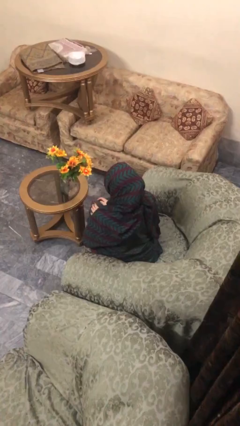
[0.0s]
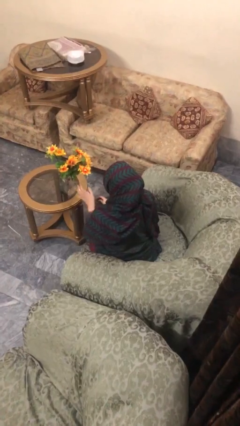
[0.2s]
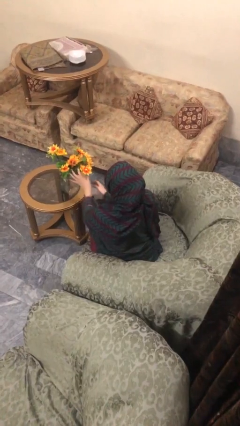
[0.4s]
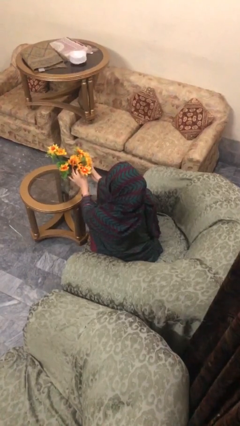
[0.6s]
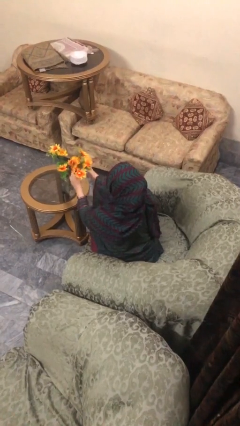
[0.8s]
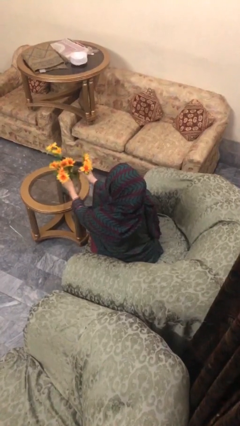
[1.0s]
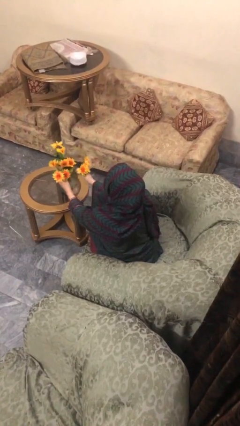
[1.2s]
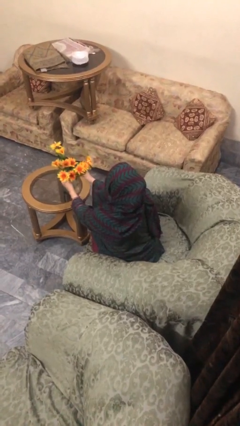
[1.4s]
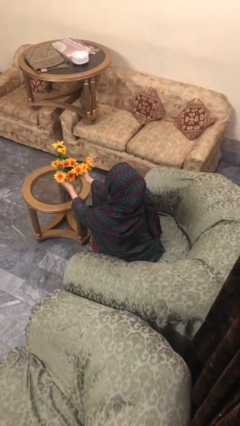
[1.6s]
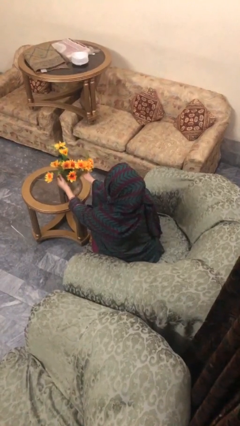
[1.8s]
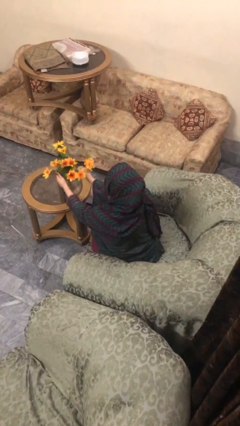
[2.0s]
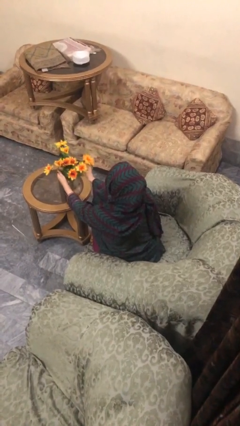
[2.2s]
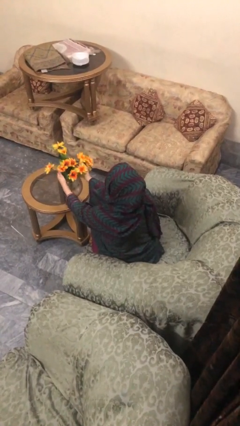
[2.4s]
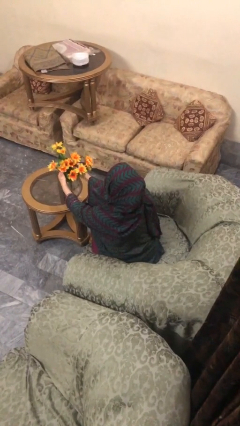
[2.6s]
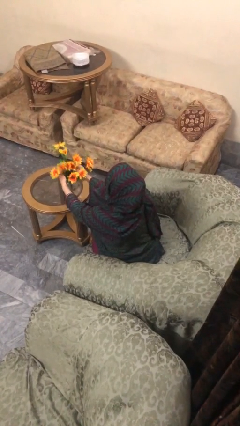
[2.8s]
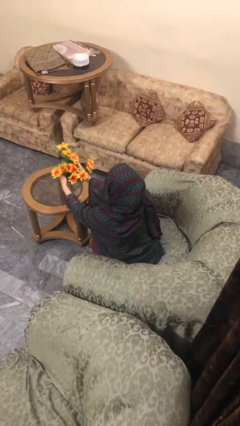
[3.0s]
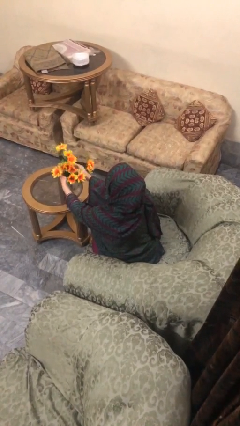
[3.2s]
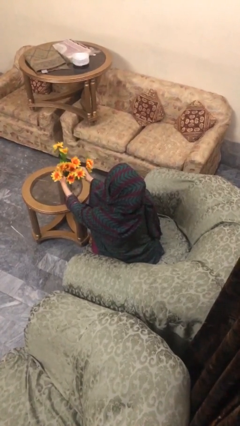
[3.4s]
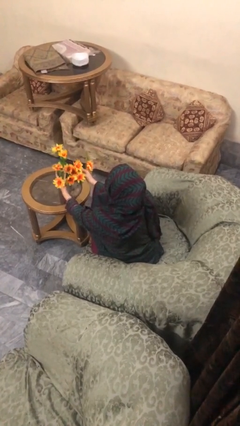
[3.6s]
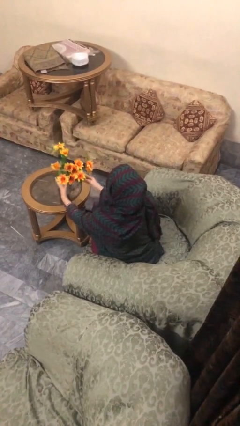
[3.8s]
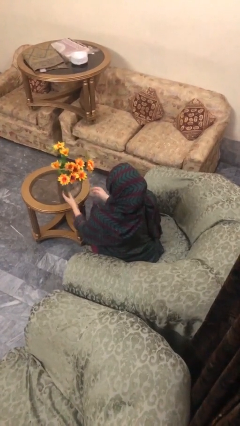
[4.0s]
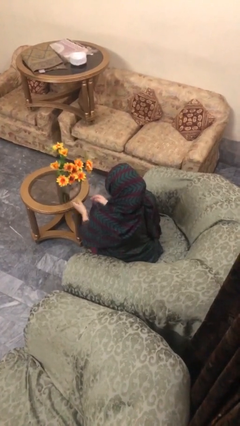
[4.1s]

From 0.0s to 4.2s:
person arranges flowers in vase

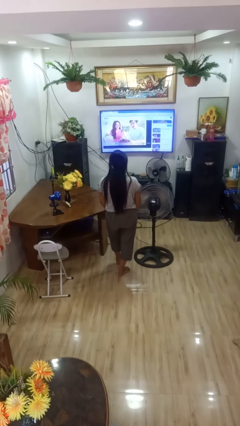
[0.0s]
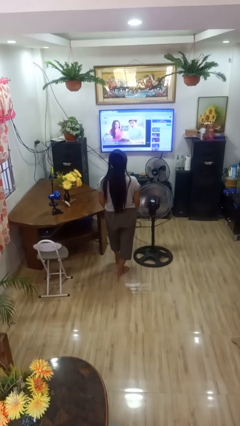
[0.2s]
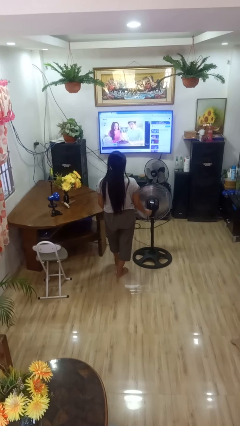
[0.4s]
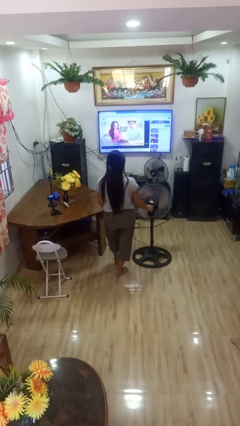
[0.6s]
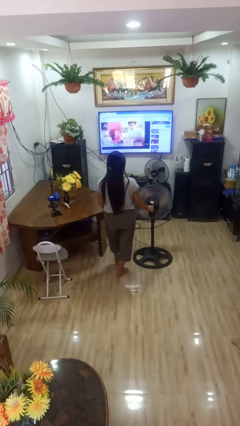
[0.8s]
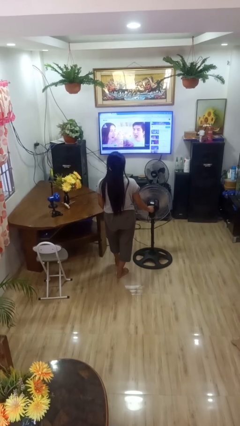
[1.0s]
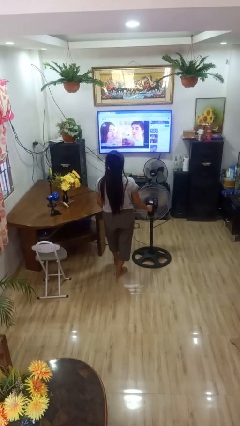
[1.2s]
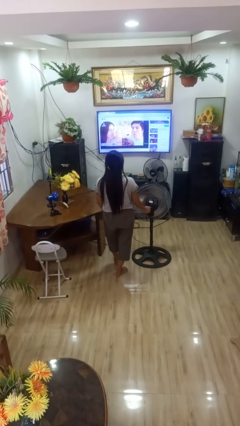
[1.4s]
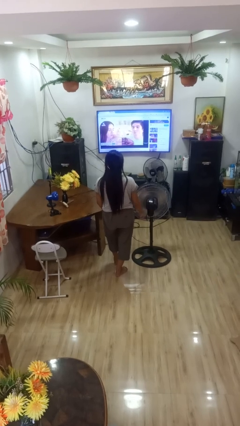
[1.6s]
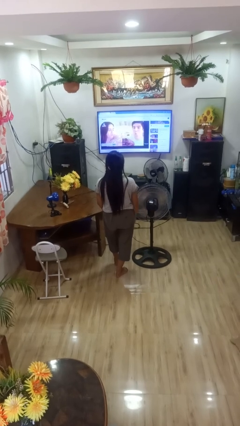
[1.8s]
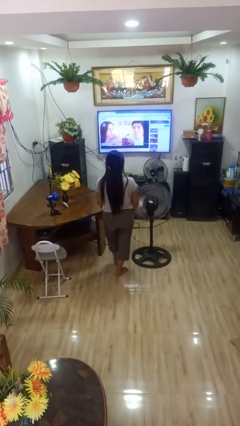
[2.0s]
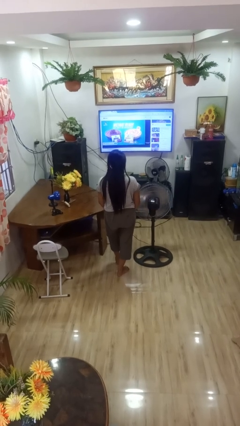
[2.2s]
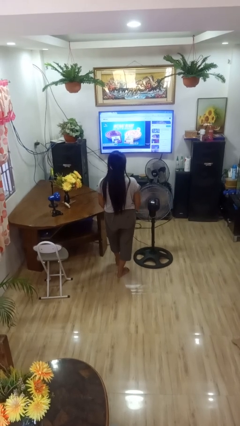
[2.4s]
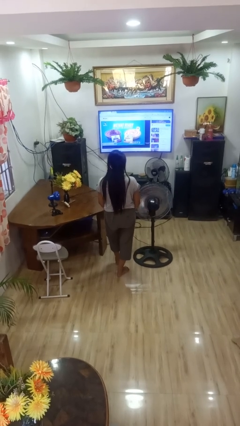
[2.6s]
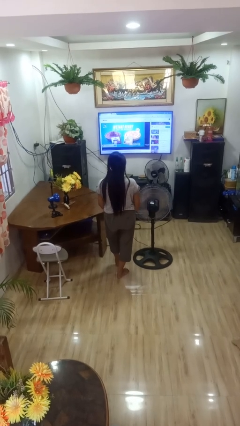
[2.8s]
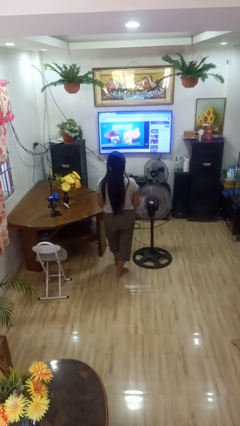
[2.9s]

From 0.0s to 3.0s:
person turns on fan

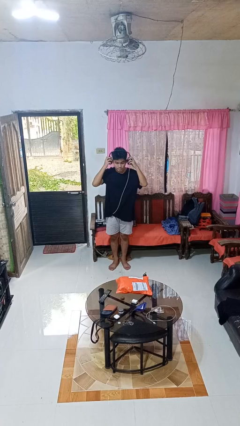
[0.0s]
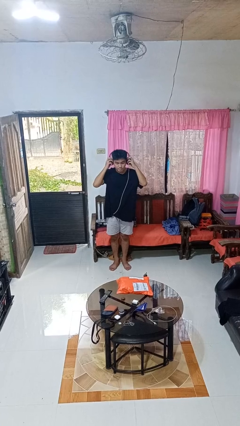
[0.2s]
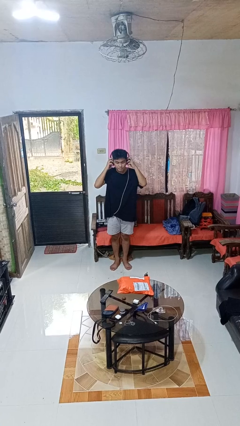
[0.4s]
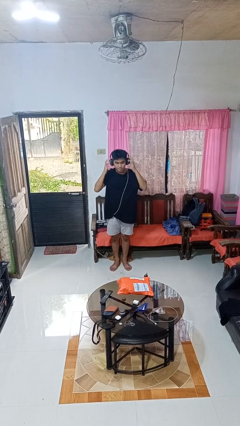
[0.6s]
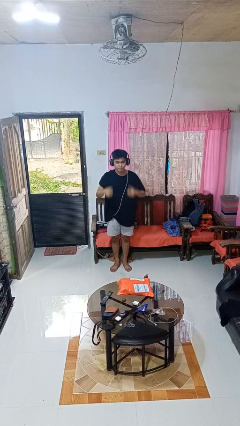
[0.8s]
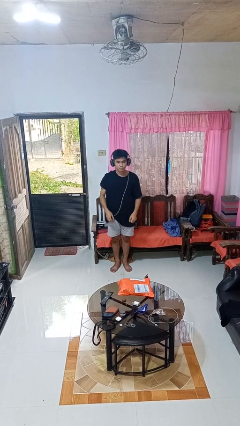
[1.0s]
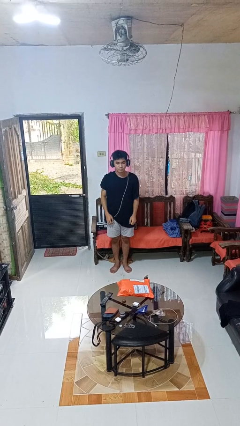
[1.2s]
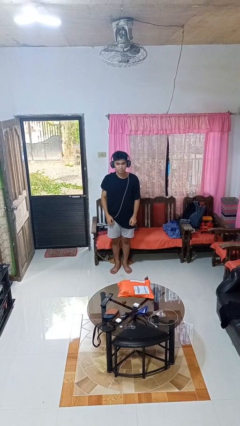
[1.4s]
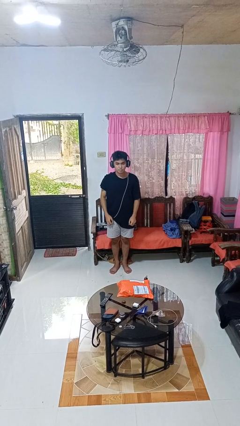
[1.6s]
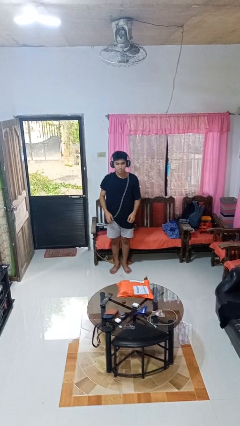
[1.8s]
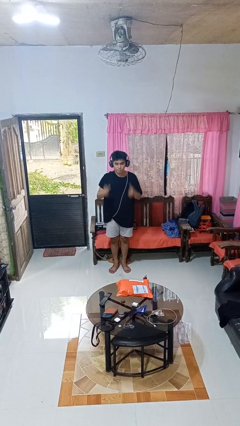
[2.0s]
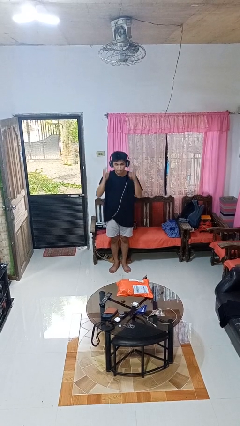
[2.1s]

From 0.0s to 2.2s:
person puts on headphones

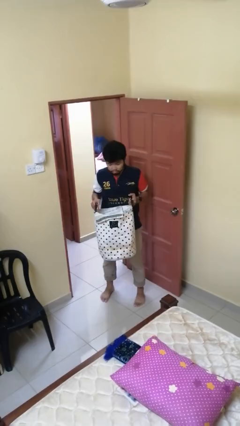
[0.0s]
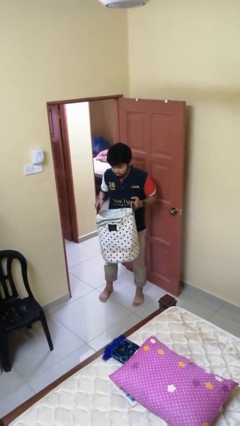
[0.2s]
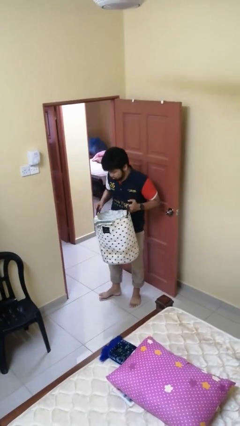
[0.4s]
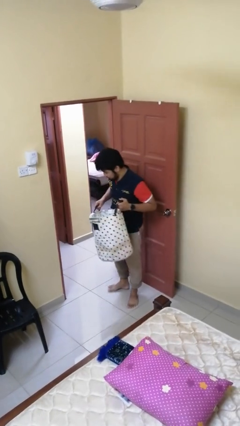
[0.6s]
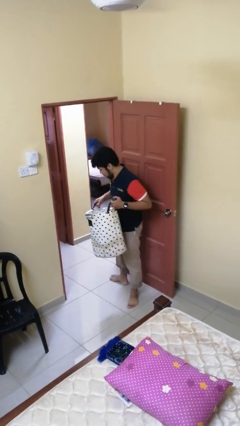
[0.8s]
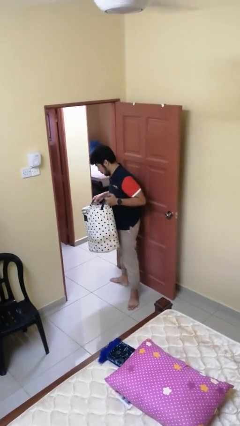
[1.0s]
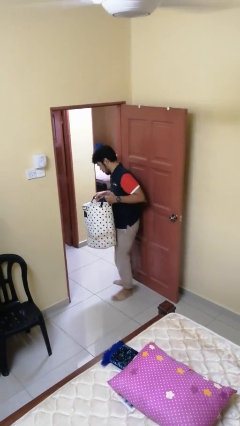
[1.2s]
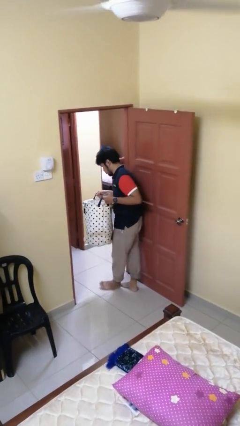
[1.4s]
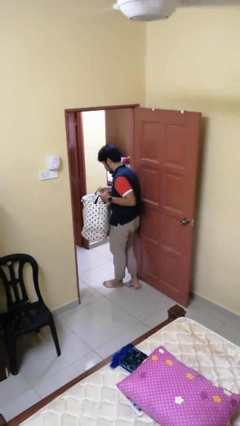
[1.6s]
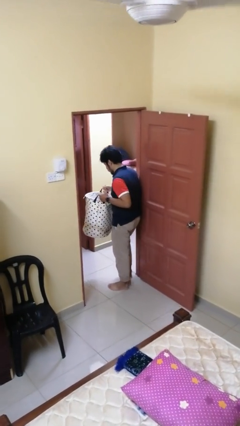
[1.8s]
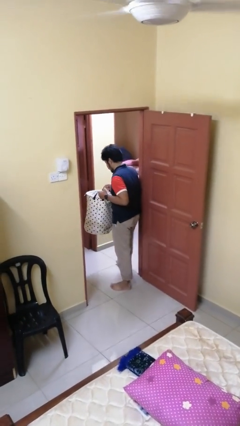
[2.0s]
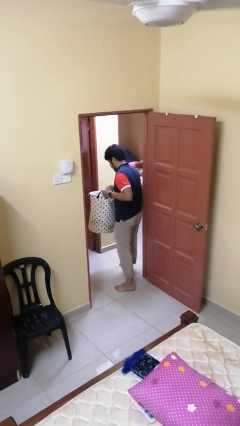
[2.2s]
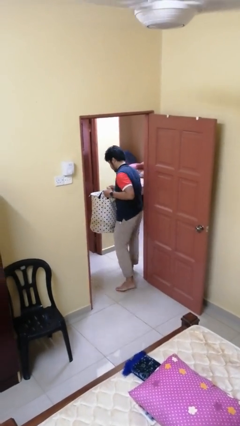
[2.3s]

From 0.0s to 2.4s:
person carries laundry basket

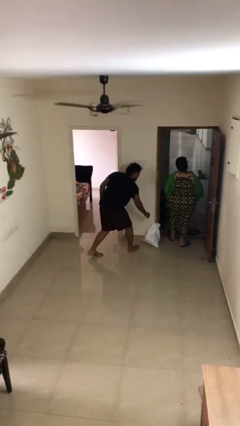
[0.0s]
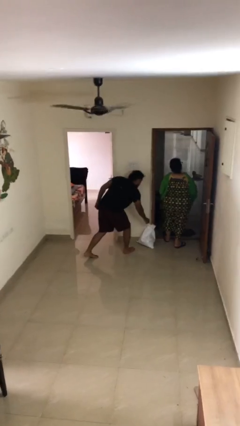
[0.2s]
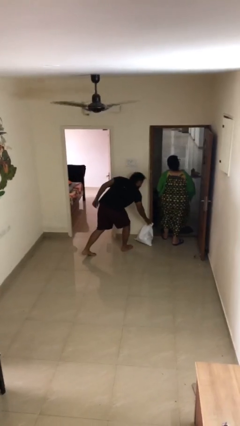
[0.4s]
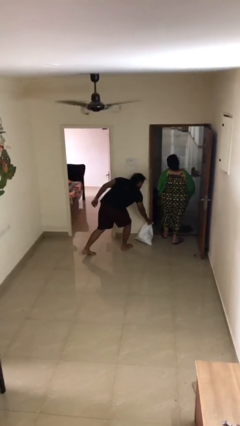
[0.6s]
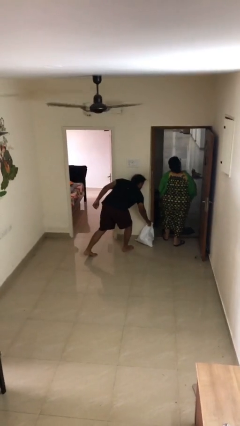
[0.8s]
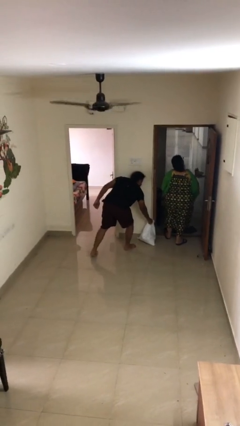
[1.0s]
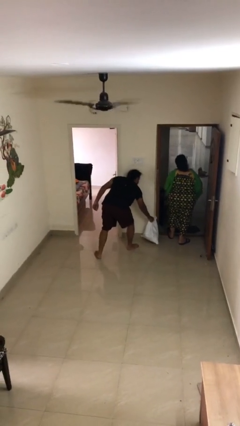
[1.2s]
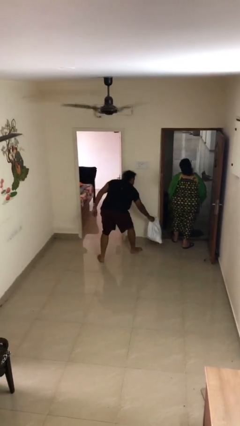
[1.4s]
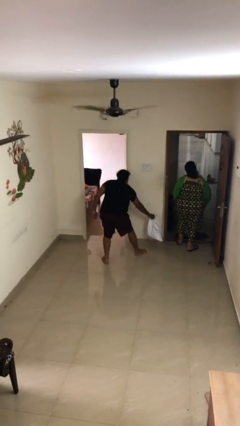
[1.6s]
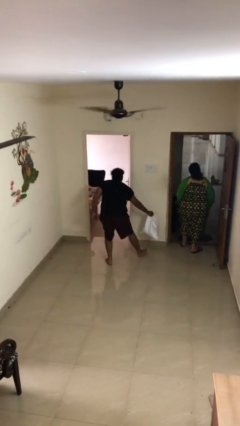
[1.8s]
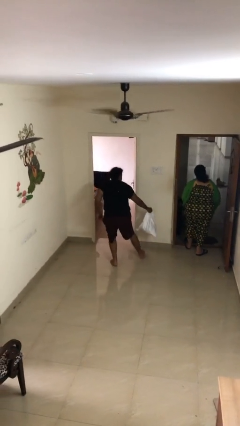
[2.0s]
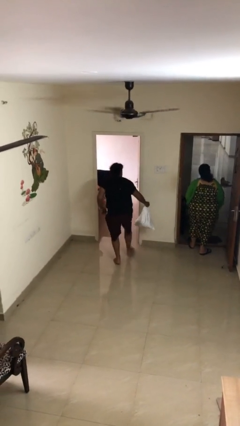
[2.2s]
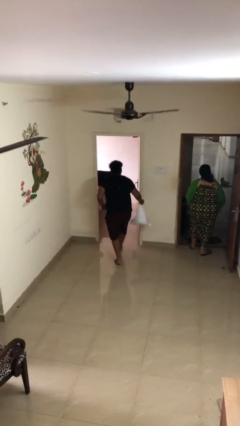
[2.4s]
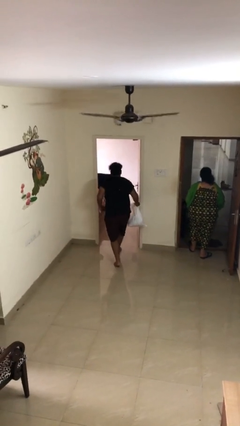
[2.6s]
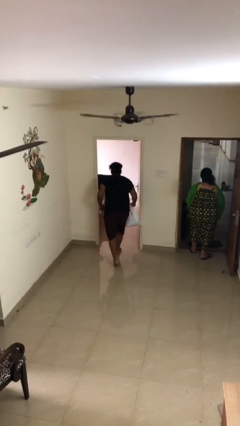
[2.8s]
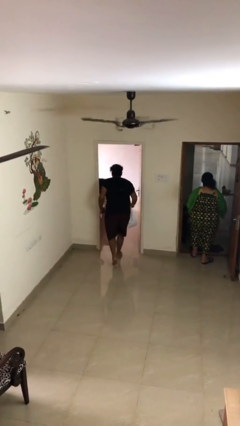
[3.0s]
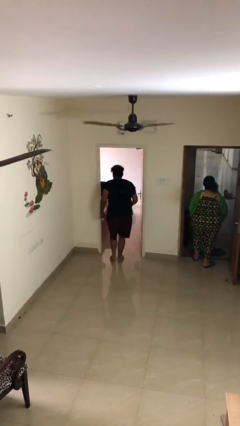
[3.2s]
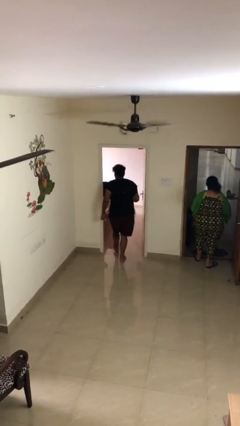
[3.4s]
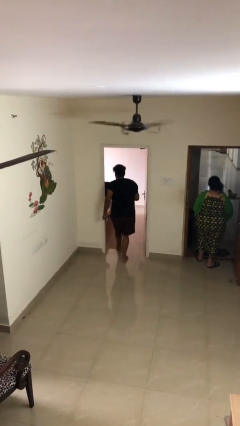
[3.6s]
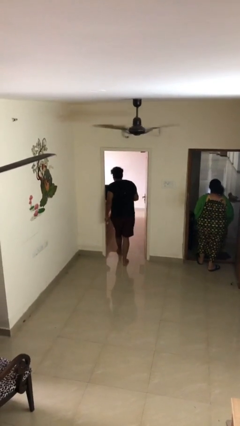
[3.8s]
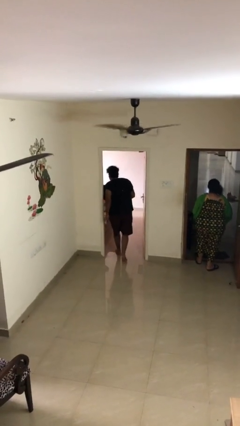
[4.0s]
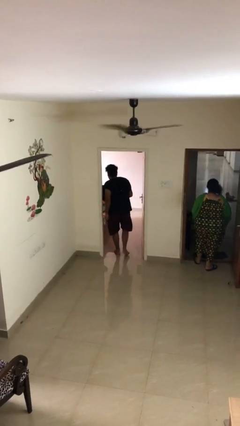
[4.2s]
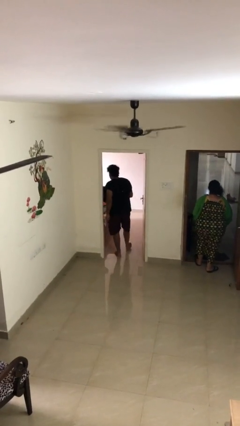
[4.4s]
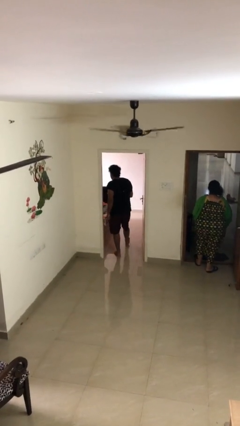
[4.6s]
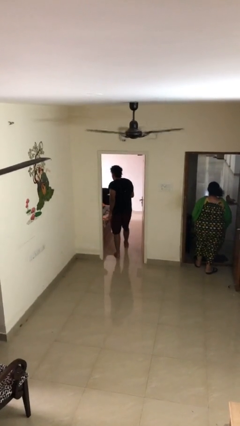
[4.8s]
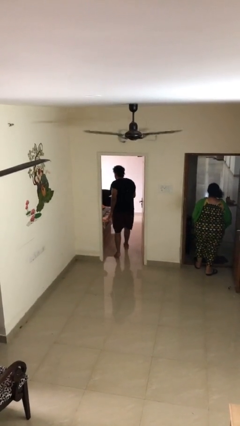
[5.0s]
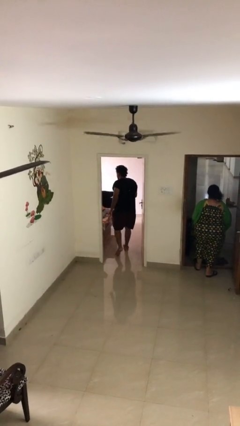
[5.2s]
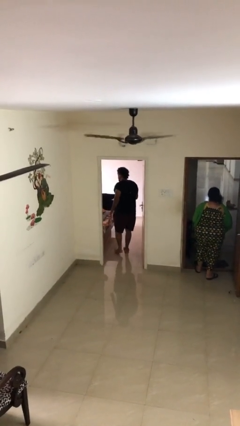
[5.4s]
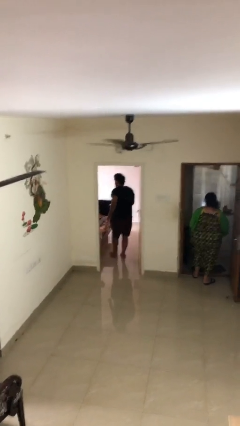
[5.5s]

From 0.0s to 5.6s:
person steals object from person
